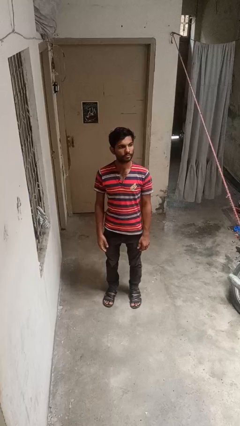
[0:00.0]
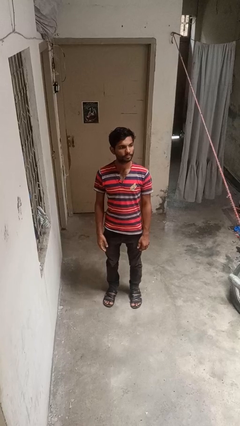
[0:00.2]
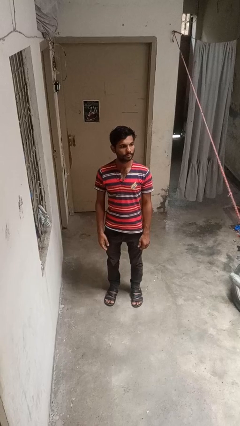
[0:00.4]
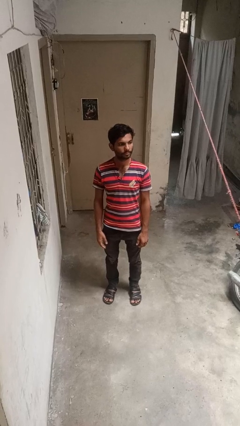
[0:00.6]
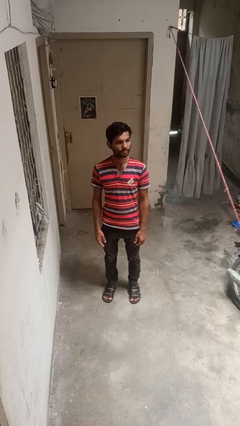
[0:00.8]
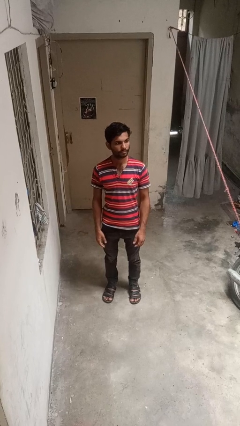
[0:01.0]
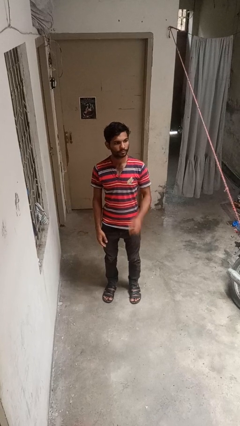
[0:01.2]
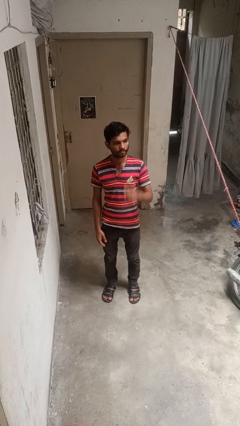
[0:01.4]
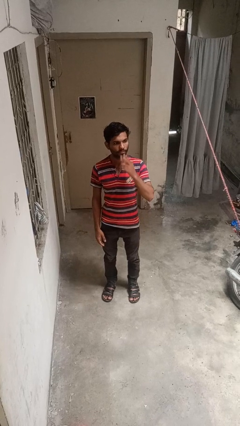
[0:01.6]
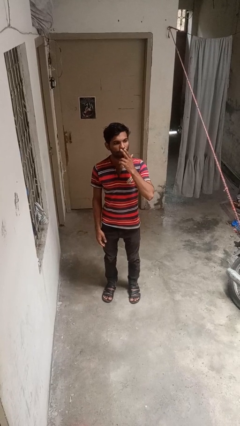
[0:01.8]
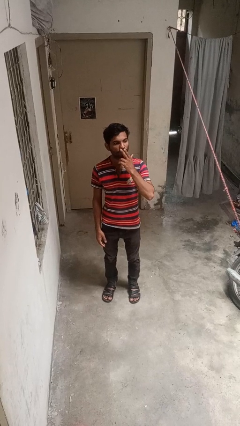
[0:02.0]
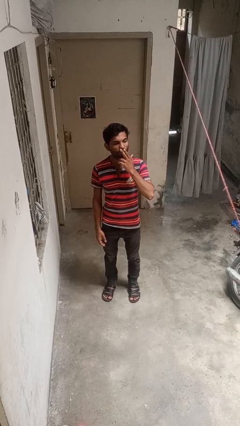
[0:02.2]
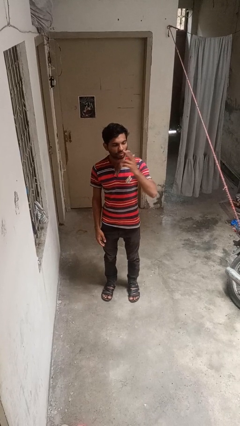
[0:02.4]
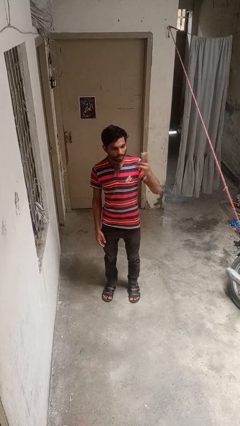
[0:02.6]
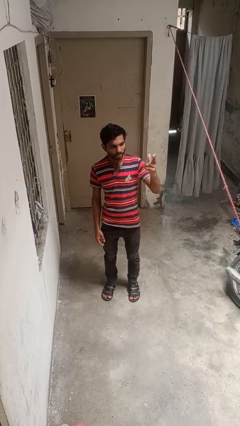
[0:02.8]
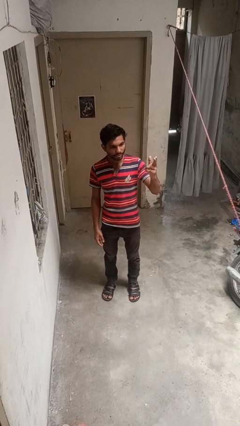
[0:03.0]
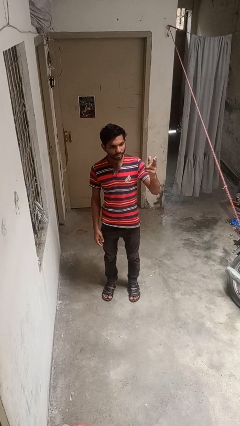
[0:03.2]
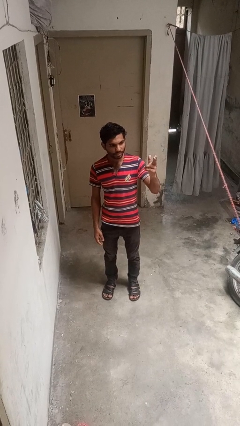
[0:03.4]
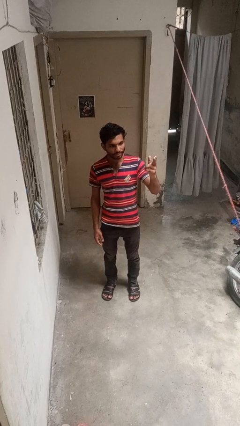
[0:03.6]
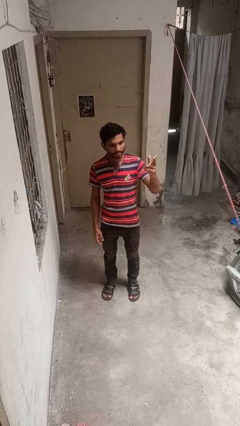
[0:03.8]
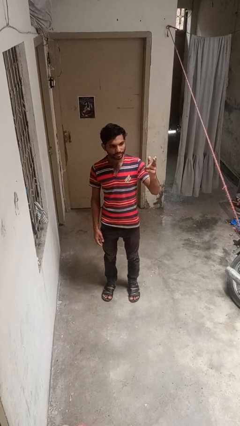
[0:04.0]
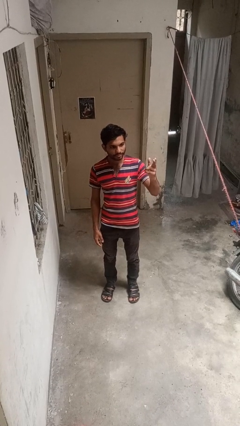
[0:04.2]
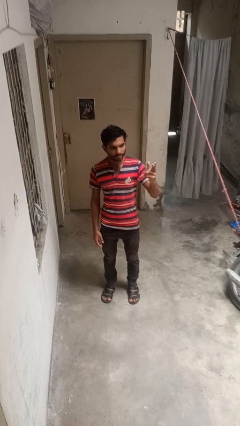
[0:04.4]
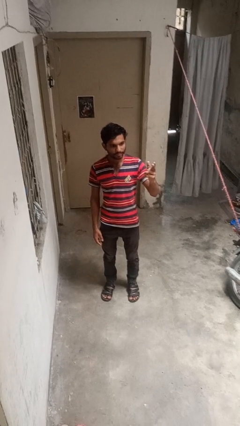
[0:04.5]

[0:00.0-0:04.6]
person gestures blow kiss

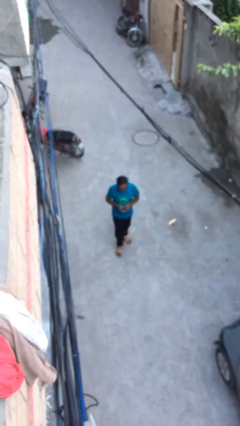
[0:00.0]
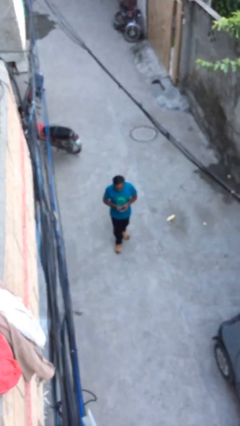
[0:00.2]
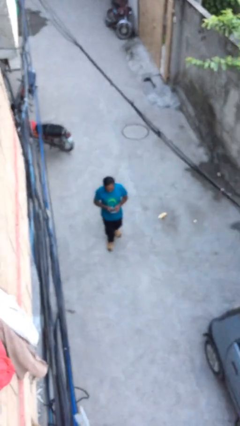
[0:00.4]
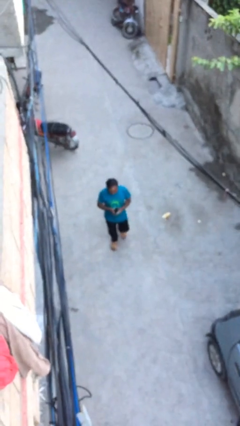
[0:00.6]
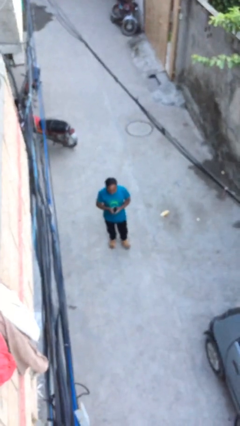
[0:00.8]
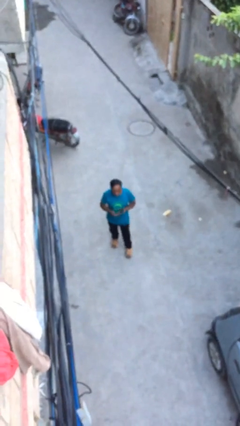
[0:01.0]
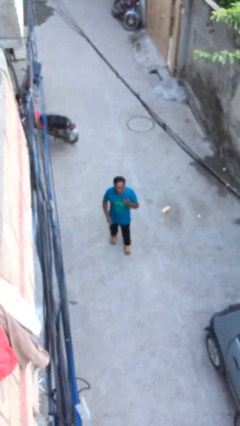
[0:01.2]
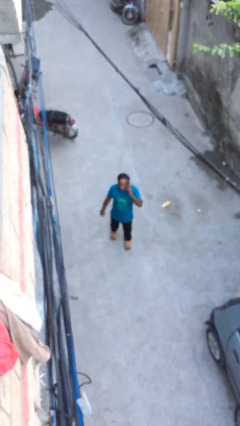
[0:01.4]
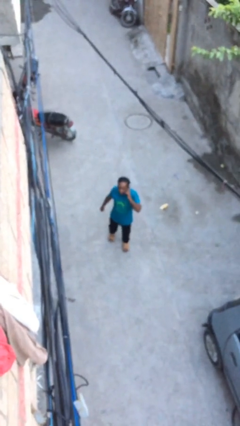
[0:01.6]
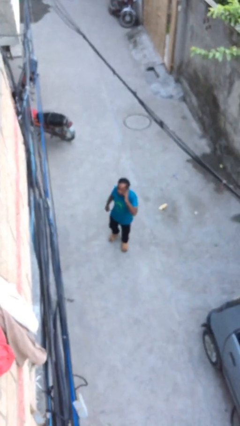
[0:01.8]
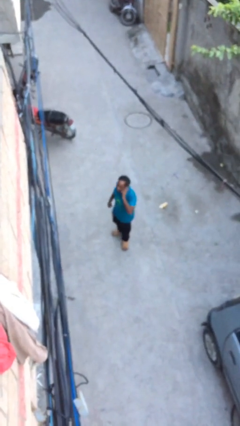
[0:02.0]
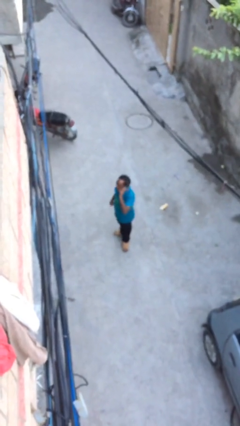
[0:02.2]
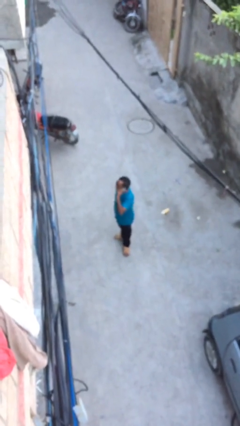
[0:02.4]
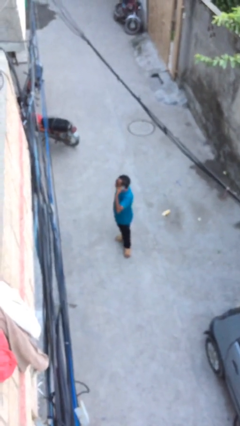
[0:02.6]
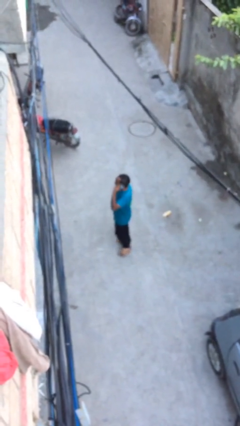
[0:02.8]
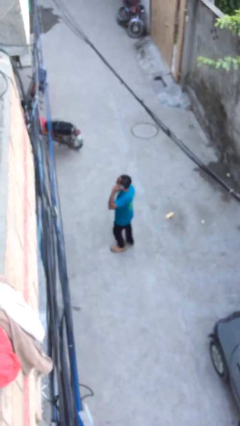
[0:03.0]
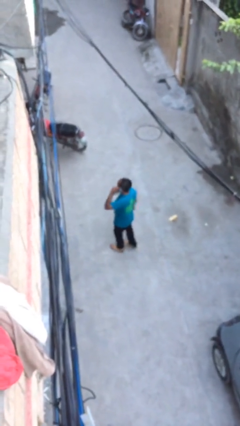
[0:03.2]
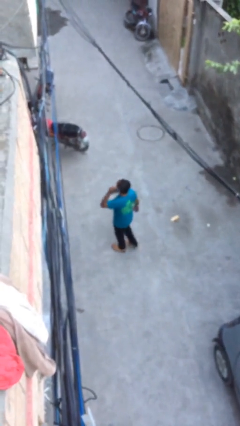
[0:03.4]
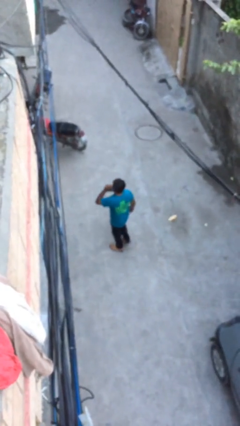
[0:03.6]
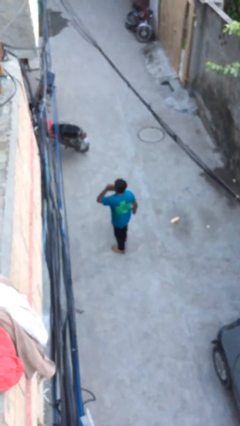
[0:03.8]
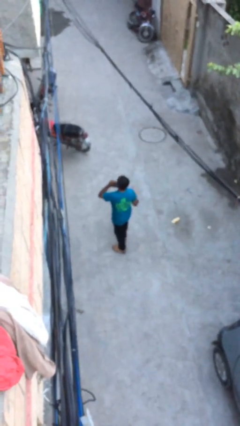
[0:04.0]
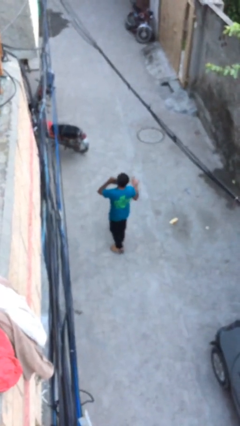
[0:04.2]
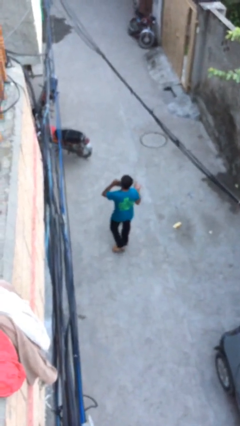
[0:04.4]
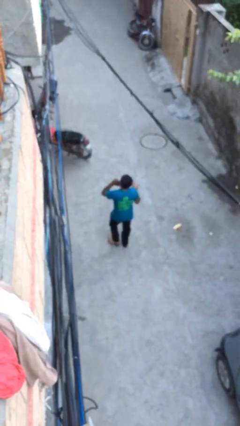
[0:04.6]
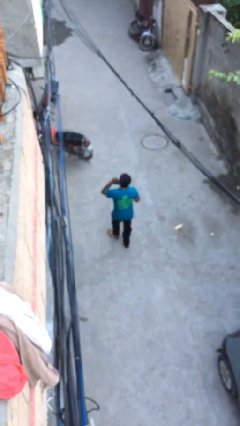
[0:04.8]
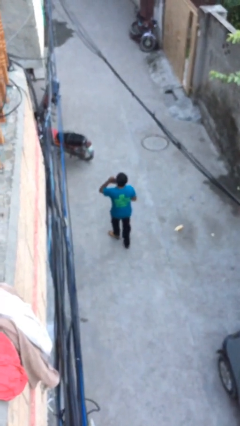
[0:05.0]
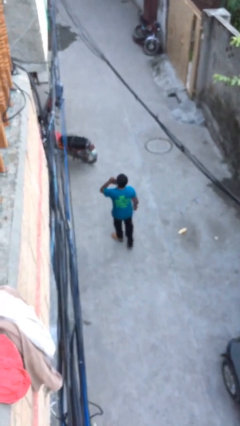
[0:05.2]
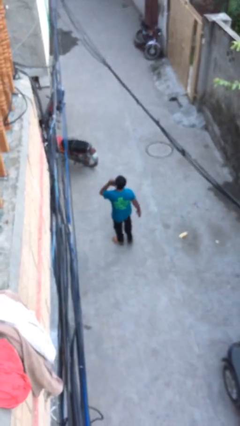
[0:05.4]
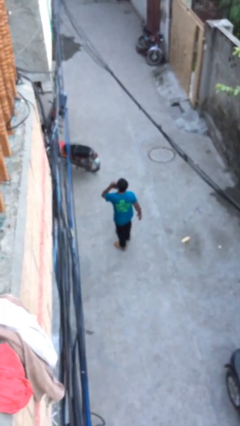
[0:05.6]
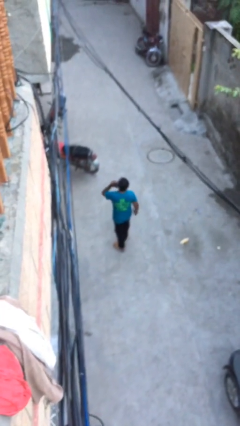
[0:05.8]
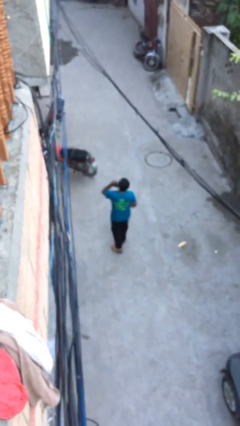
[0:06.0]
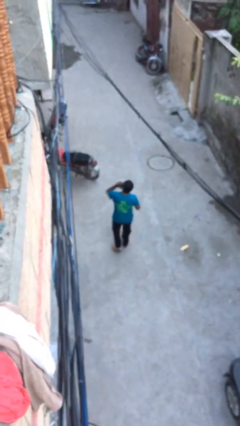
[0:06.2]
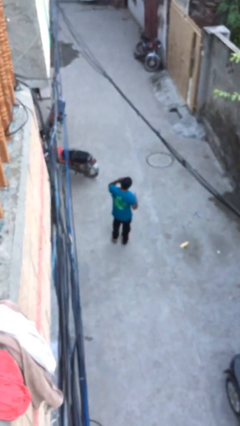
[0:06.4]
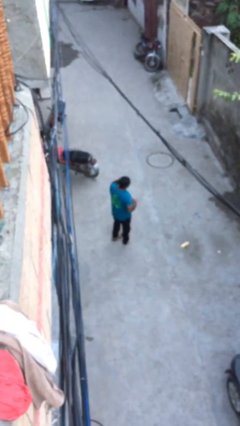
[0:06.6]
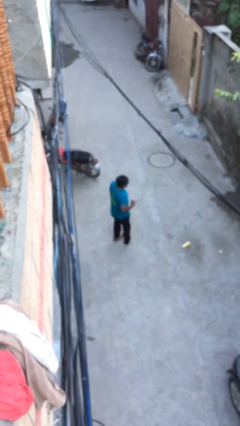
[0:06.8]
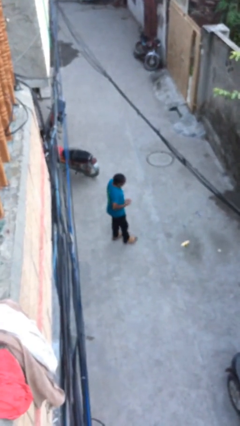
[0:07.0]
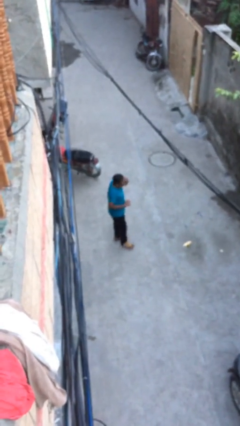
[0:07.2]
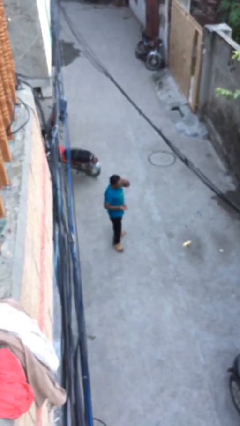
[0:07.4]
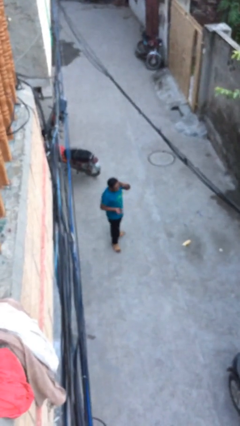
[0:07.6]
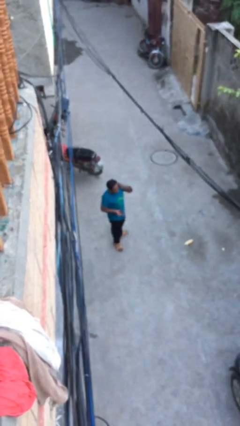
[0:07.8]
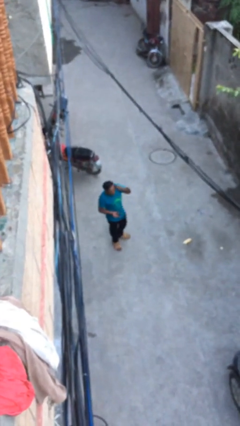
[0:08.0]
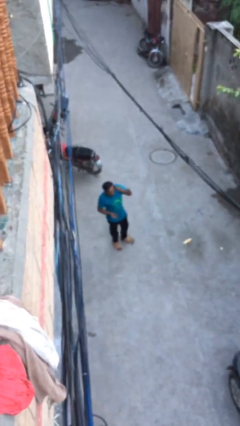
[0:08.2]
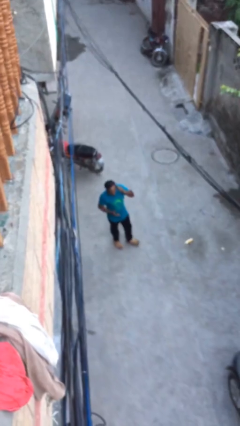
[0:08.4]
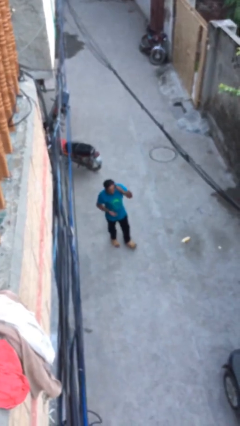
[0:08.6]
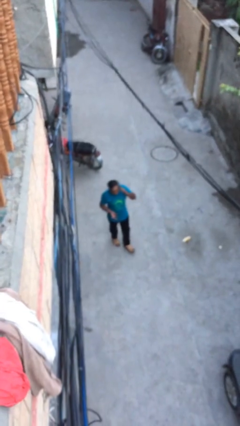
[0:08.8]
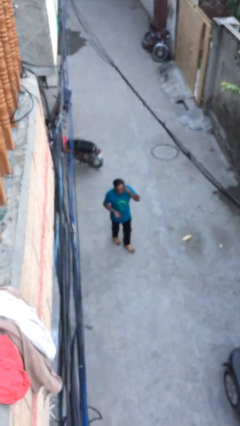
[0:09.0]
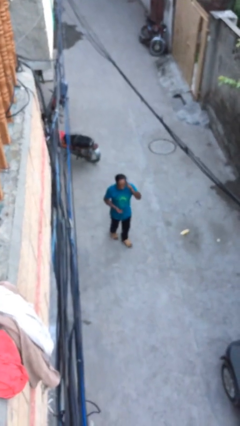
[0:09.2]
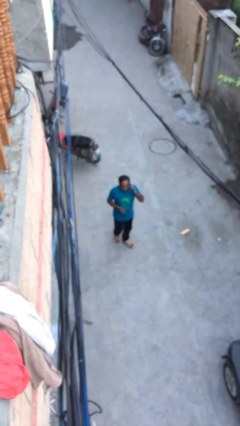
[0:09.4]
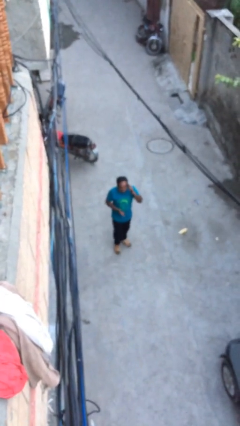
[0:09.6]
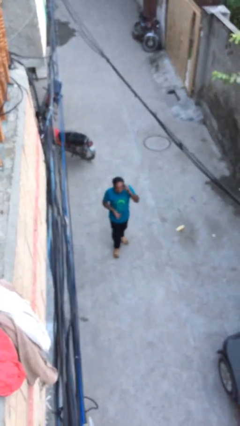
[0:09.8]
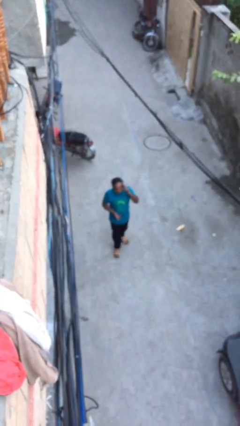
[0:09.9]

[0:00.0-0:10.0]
person talks on phone

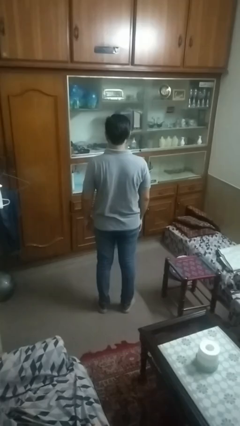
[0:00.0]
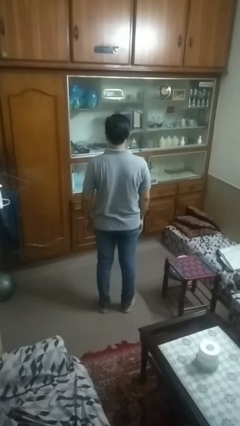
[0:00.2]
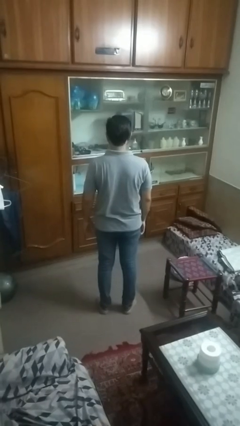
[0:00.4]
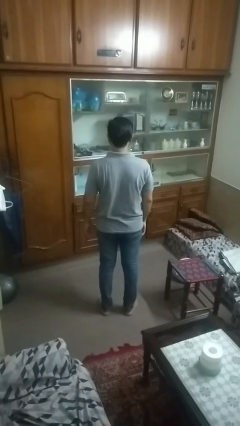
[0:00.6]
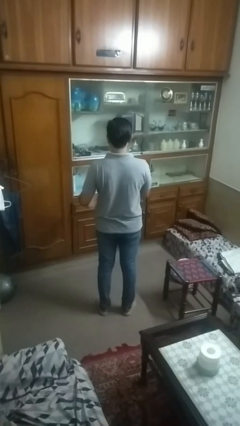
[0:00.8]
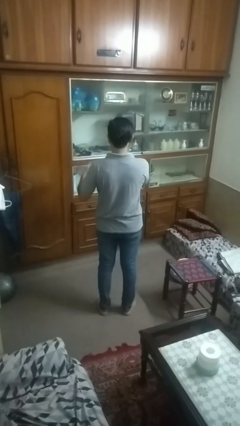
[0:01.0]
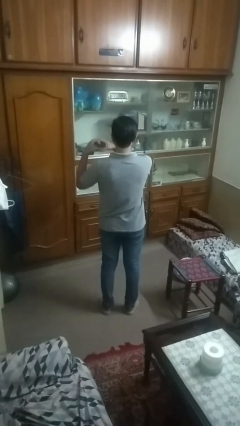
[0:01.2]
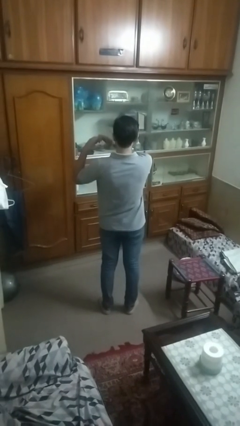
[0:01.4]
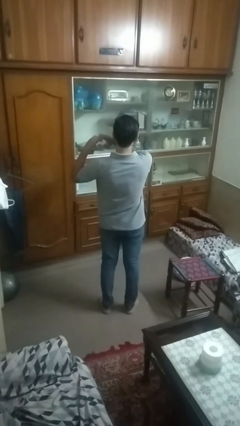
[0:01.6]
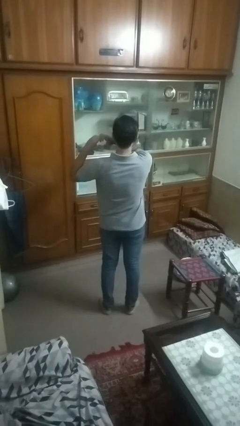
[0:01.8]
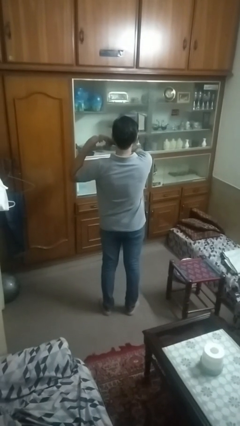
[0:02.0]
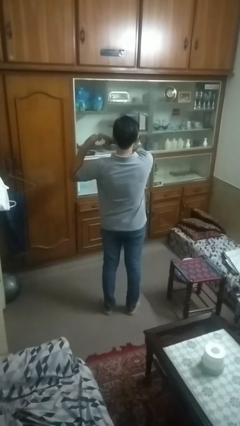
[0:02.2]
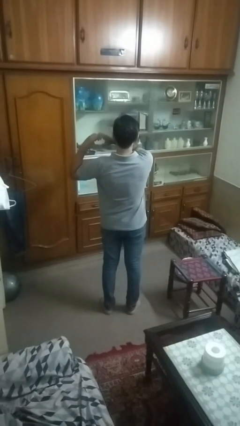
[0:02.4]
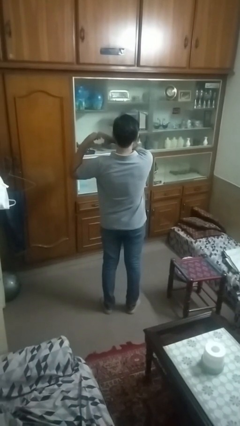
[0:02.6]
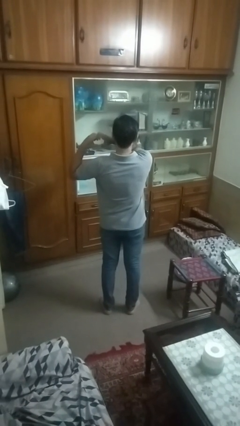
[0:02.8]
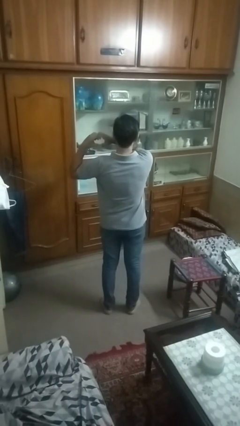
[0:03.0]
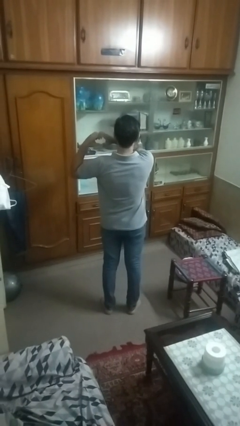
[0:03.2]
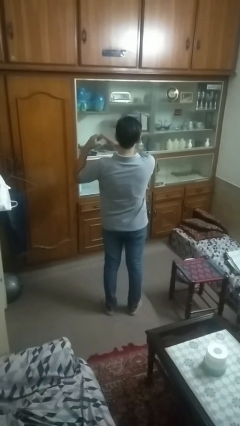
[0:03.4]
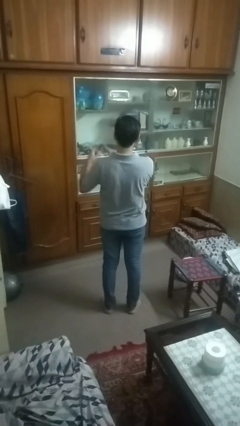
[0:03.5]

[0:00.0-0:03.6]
person gestures heart
